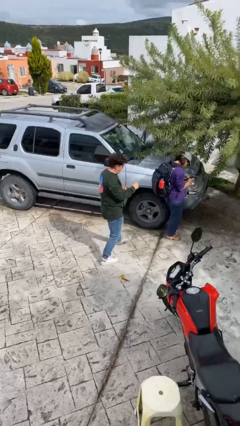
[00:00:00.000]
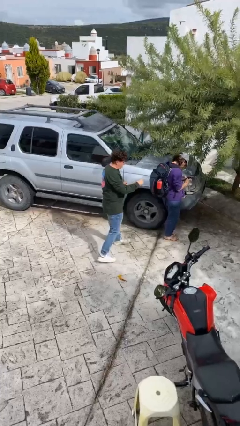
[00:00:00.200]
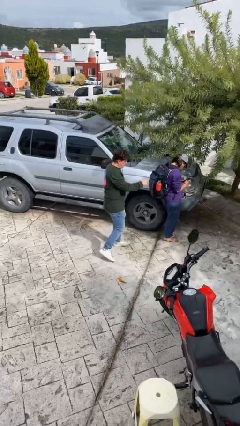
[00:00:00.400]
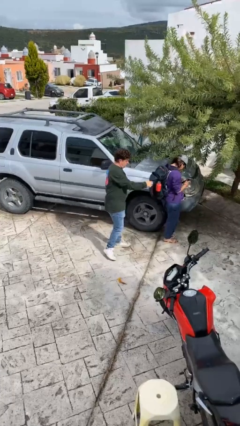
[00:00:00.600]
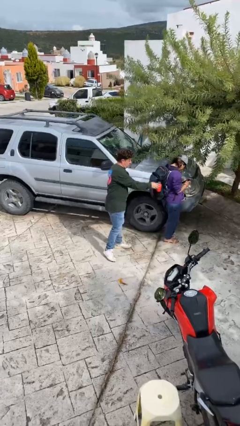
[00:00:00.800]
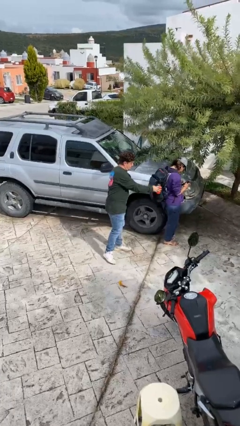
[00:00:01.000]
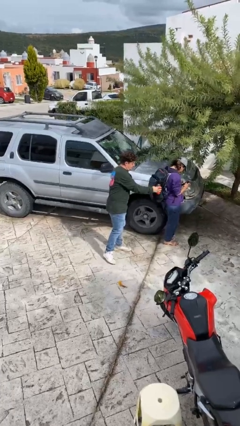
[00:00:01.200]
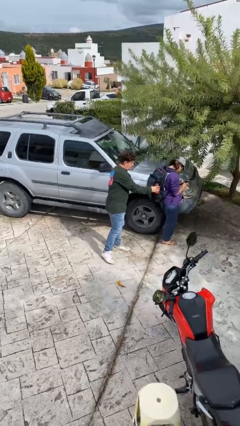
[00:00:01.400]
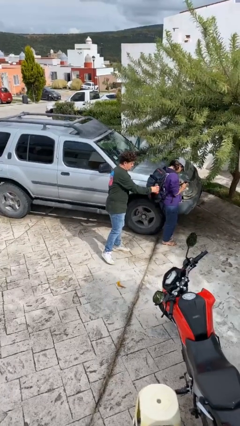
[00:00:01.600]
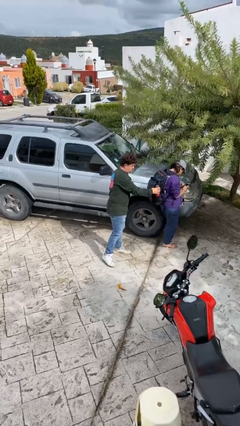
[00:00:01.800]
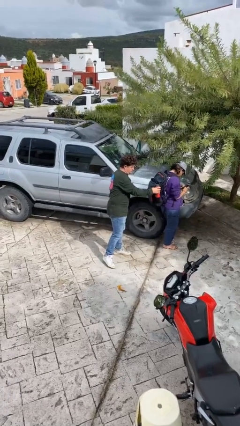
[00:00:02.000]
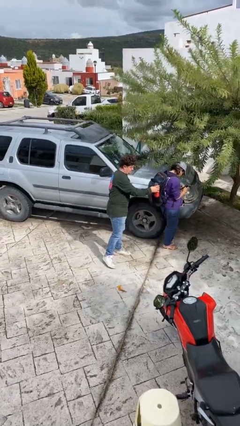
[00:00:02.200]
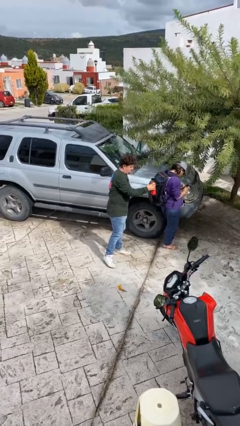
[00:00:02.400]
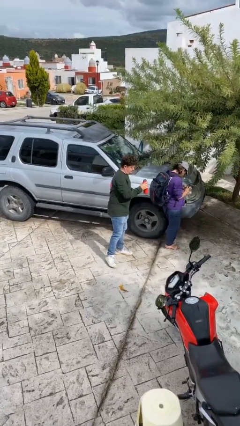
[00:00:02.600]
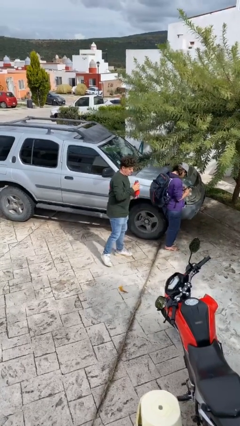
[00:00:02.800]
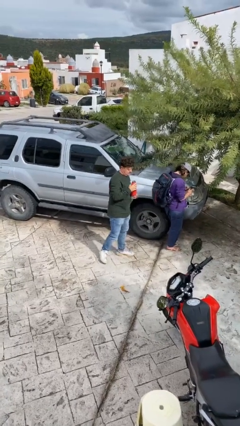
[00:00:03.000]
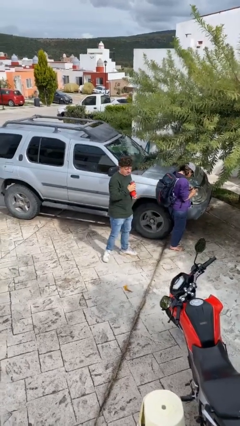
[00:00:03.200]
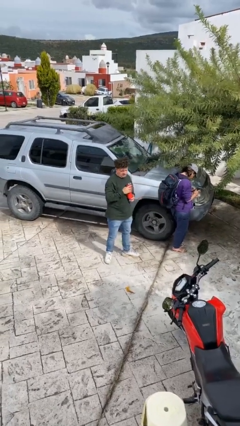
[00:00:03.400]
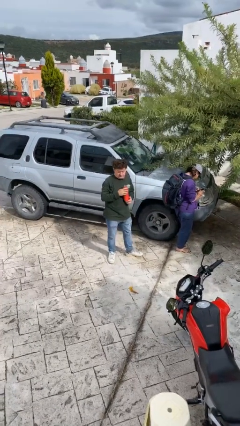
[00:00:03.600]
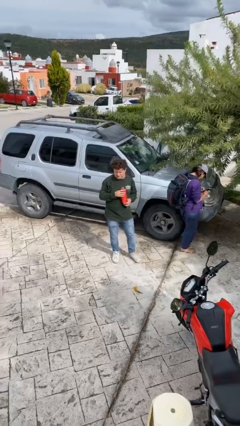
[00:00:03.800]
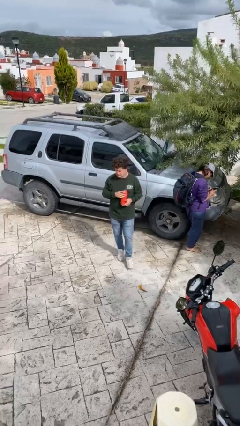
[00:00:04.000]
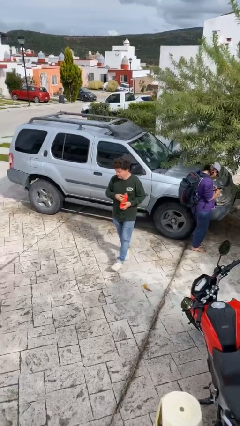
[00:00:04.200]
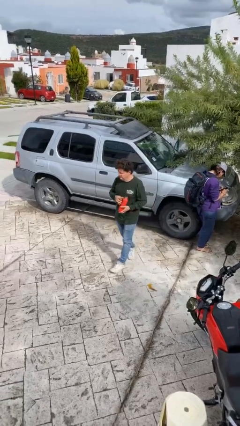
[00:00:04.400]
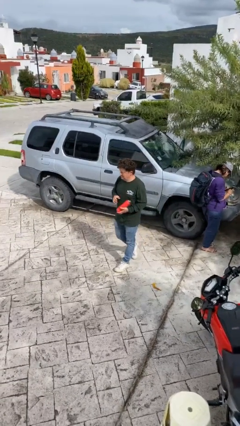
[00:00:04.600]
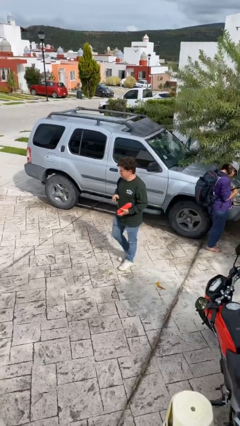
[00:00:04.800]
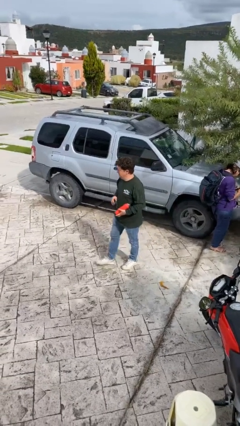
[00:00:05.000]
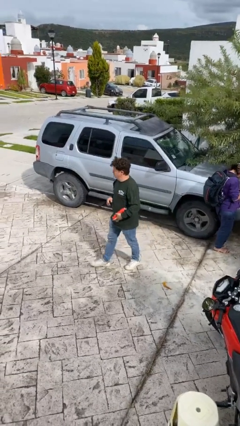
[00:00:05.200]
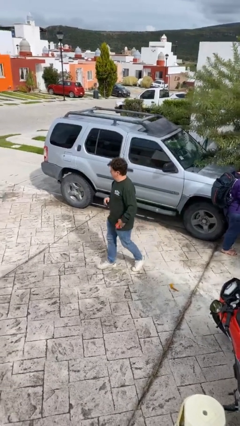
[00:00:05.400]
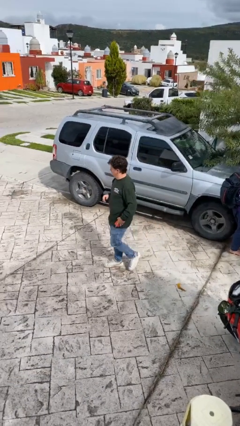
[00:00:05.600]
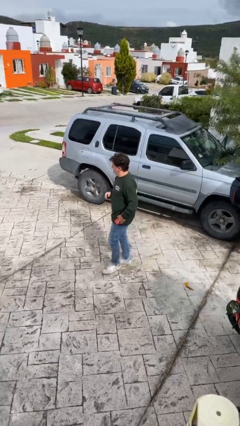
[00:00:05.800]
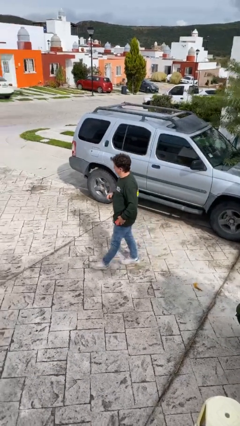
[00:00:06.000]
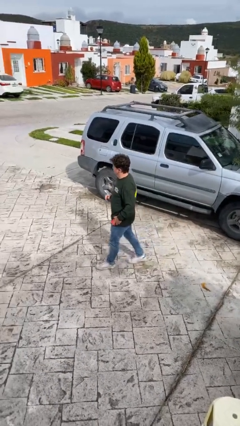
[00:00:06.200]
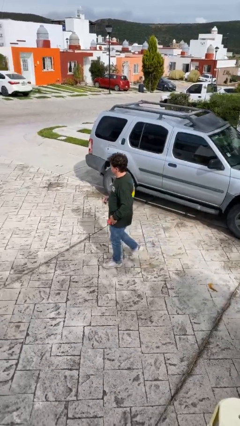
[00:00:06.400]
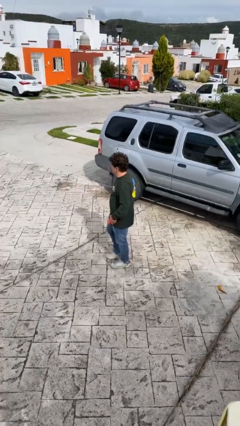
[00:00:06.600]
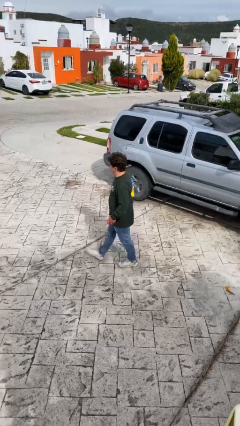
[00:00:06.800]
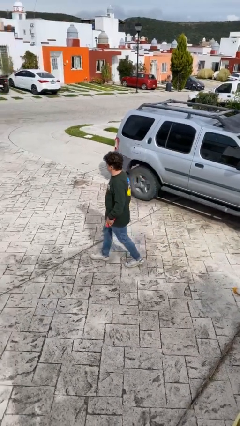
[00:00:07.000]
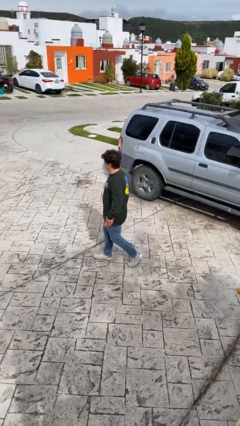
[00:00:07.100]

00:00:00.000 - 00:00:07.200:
person steals object from person

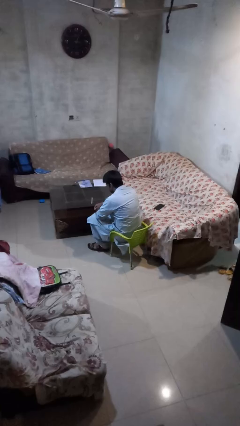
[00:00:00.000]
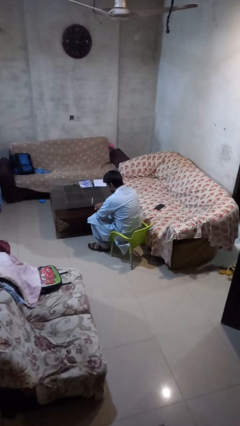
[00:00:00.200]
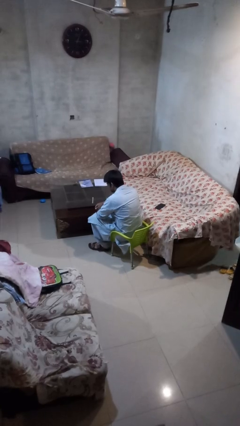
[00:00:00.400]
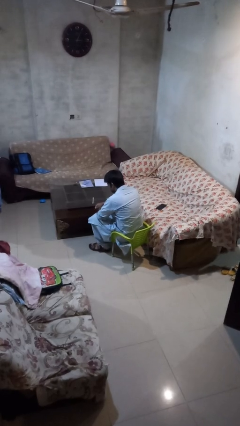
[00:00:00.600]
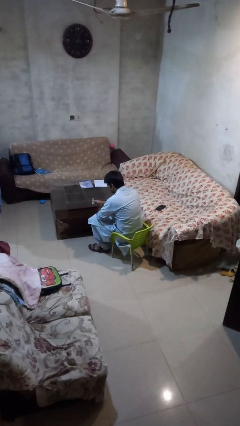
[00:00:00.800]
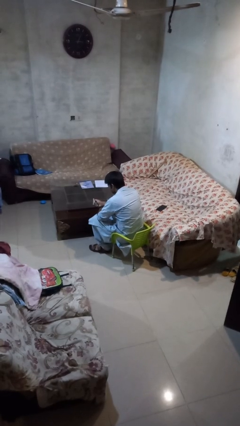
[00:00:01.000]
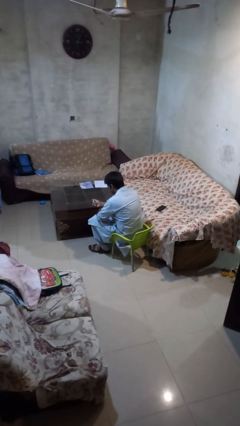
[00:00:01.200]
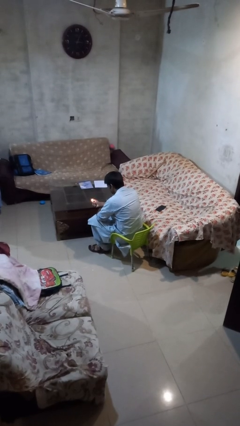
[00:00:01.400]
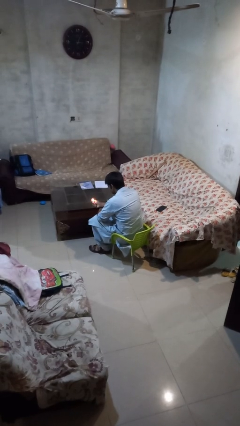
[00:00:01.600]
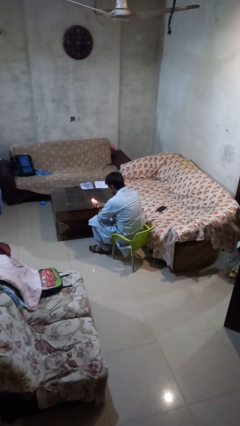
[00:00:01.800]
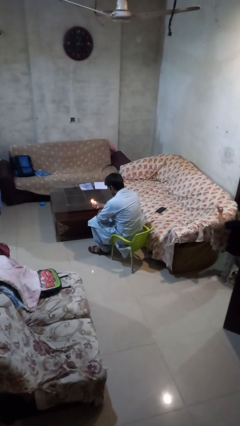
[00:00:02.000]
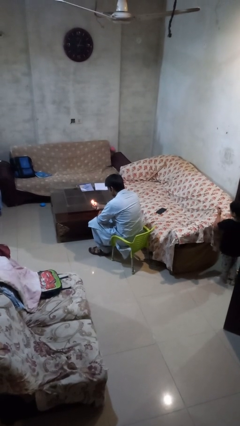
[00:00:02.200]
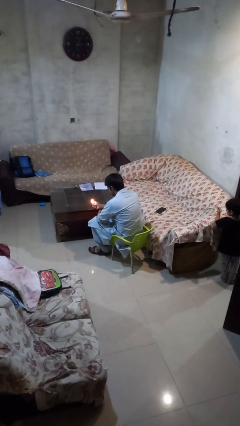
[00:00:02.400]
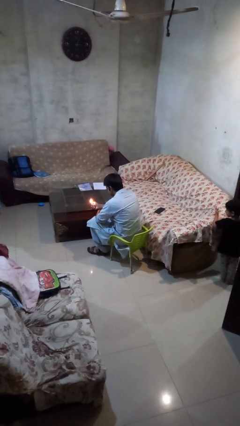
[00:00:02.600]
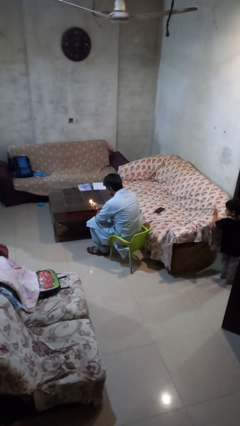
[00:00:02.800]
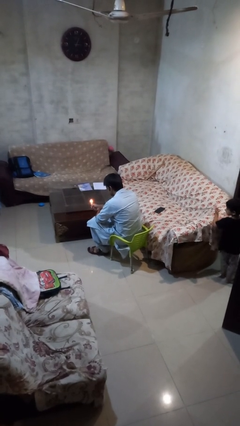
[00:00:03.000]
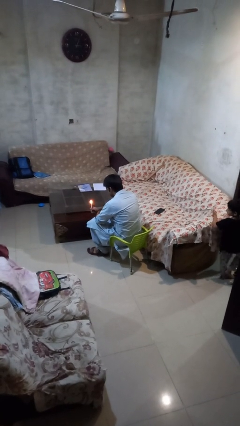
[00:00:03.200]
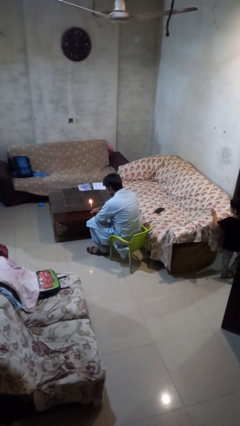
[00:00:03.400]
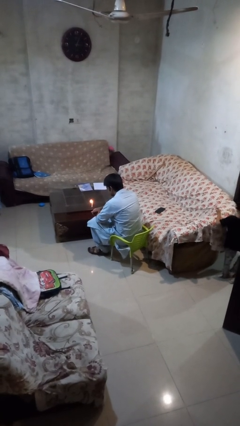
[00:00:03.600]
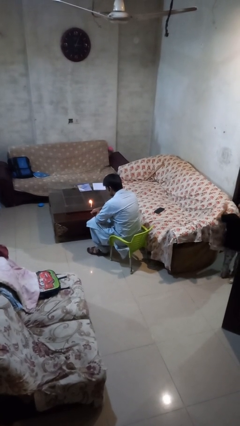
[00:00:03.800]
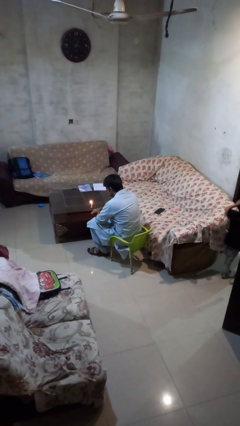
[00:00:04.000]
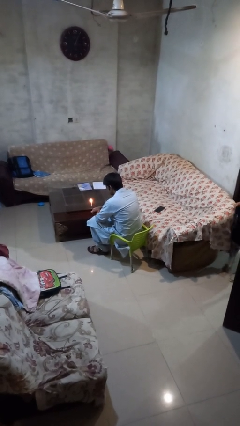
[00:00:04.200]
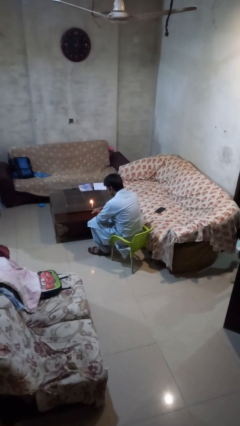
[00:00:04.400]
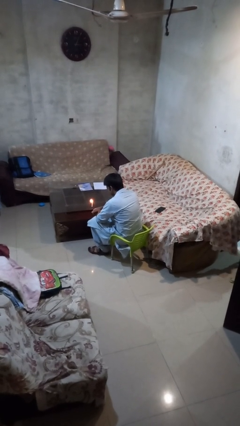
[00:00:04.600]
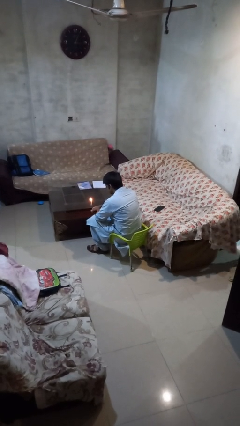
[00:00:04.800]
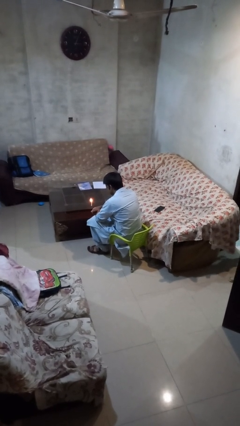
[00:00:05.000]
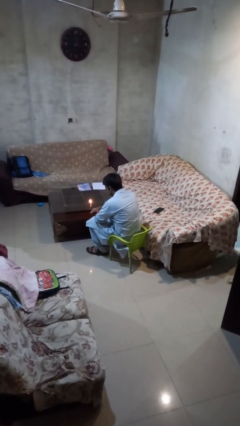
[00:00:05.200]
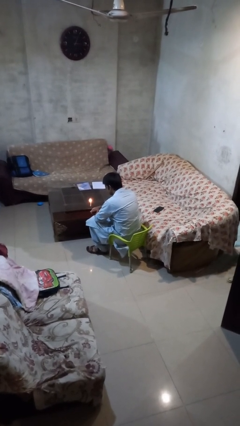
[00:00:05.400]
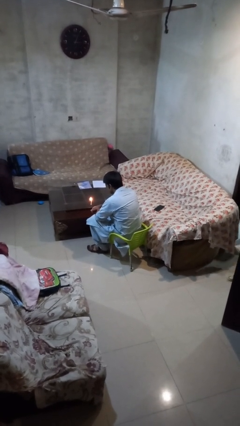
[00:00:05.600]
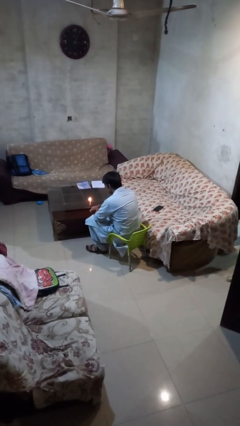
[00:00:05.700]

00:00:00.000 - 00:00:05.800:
person lights candle

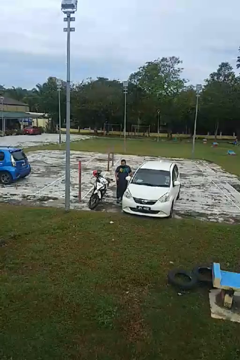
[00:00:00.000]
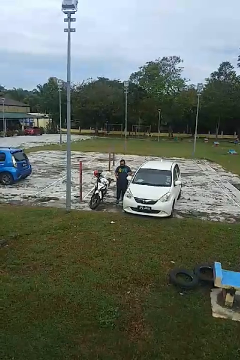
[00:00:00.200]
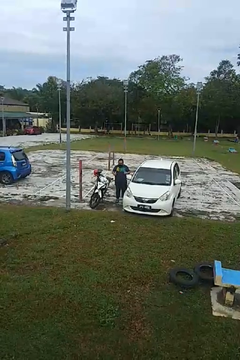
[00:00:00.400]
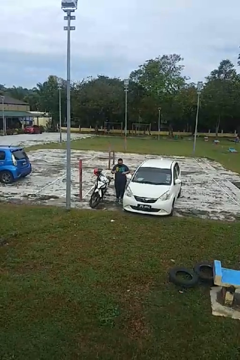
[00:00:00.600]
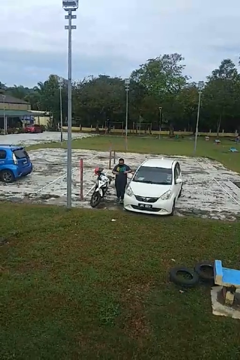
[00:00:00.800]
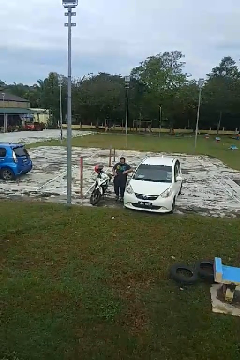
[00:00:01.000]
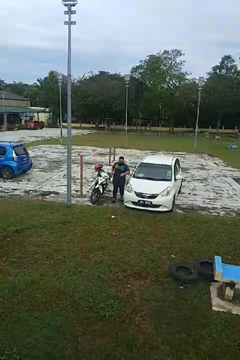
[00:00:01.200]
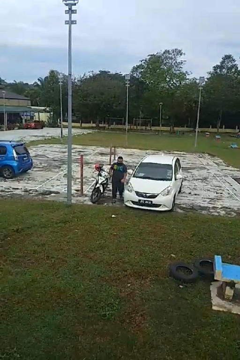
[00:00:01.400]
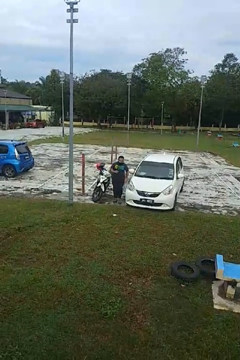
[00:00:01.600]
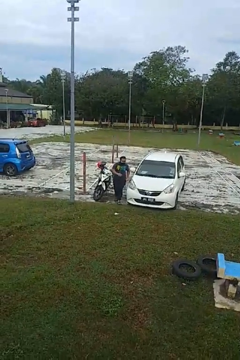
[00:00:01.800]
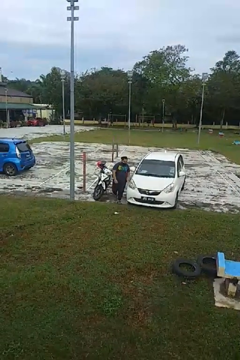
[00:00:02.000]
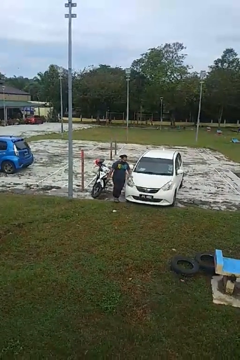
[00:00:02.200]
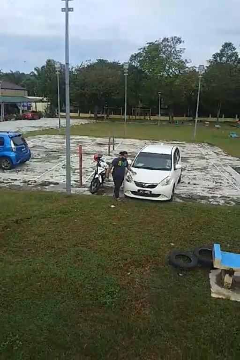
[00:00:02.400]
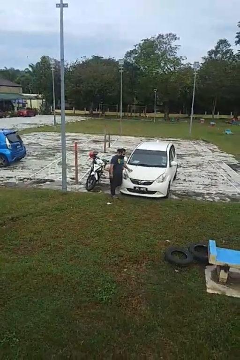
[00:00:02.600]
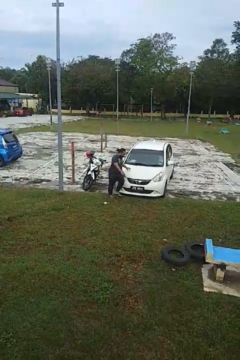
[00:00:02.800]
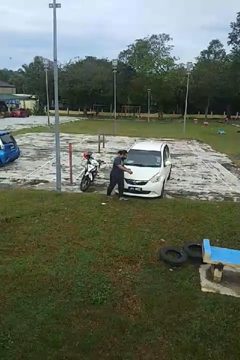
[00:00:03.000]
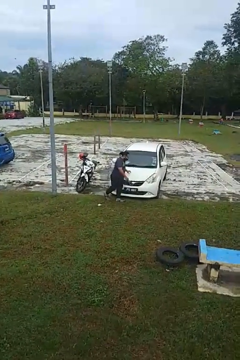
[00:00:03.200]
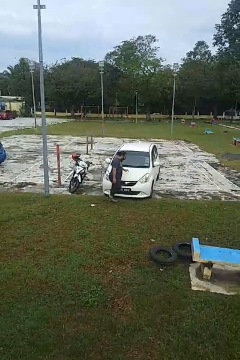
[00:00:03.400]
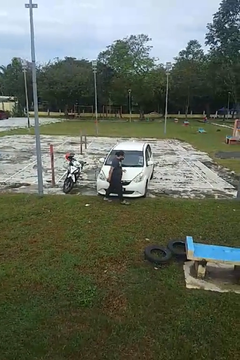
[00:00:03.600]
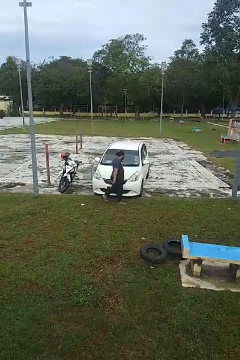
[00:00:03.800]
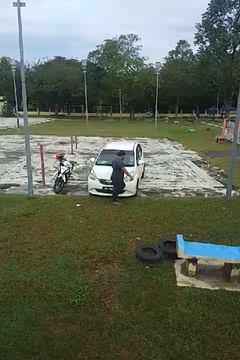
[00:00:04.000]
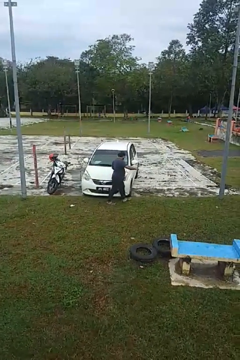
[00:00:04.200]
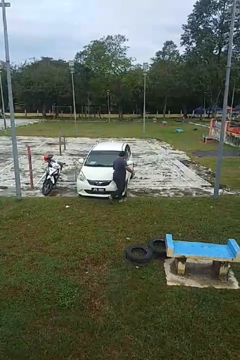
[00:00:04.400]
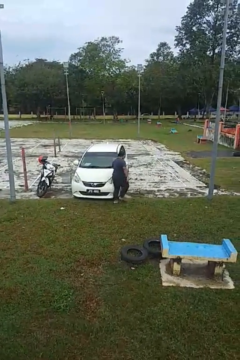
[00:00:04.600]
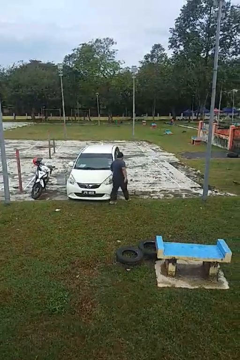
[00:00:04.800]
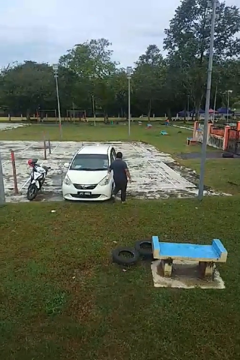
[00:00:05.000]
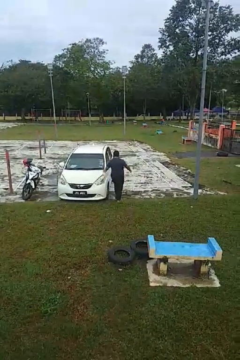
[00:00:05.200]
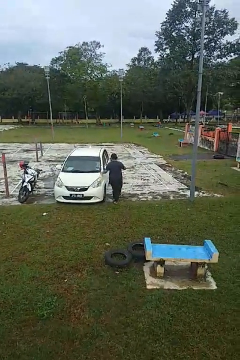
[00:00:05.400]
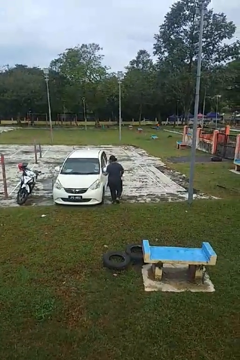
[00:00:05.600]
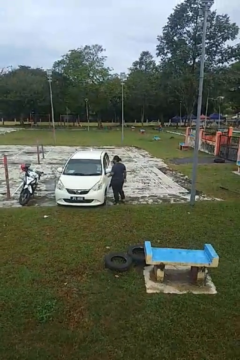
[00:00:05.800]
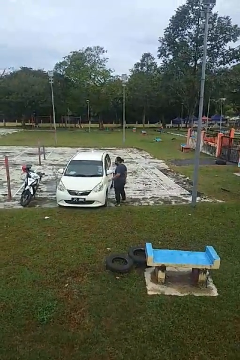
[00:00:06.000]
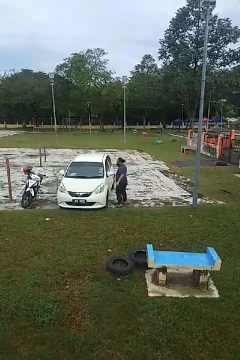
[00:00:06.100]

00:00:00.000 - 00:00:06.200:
person walks around car
